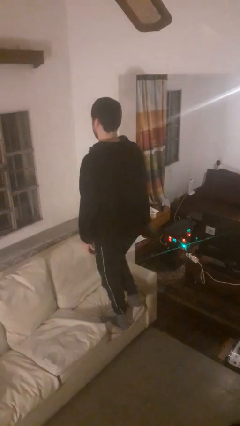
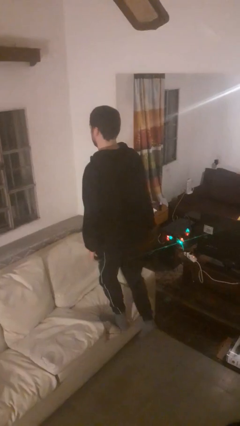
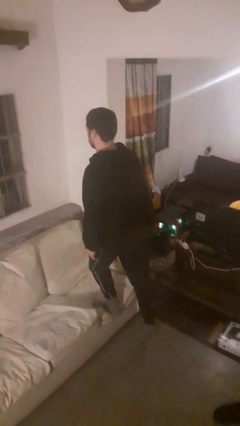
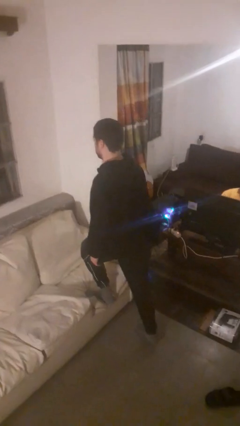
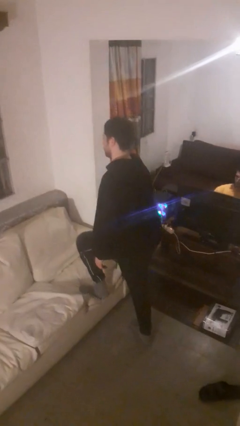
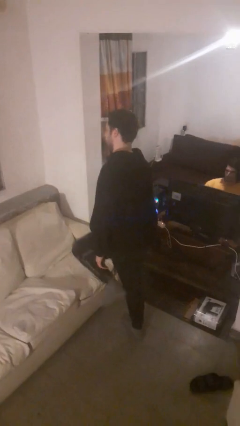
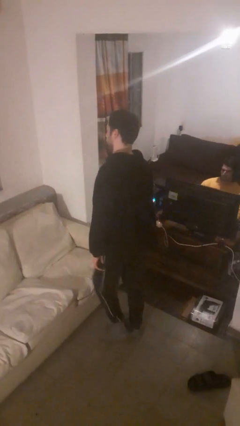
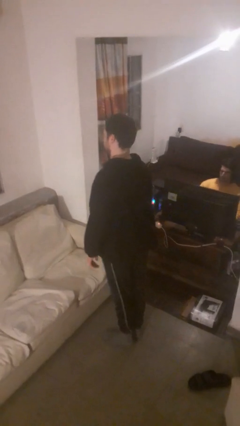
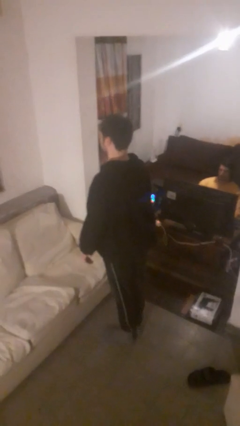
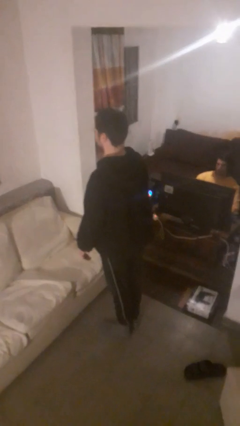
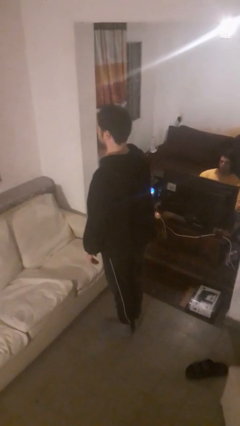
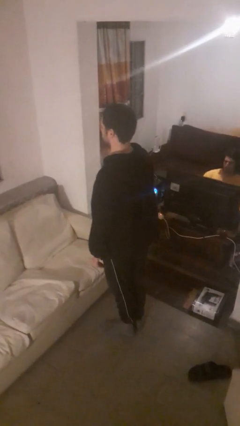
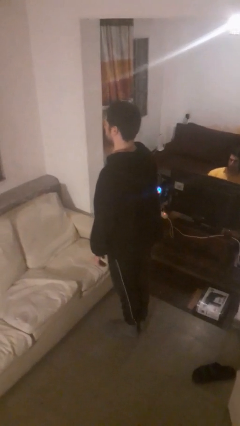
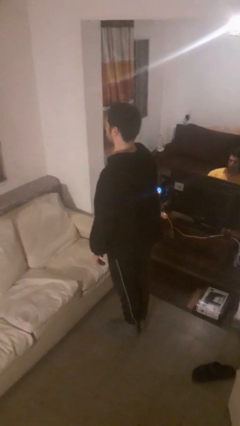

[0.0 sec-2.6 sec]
person climbs off couch

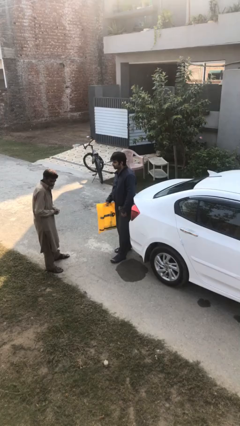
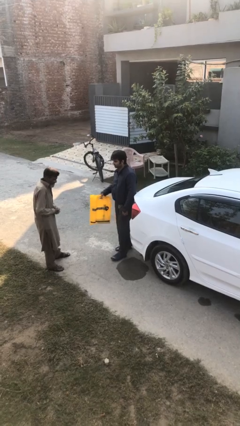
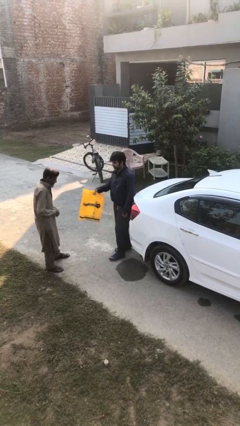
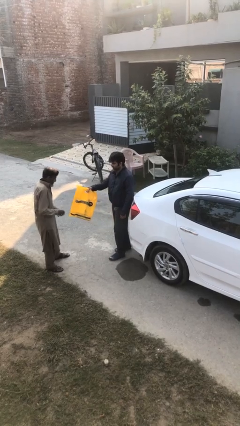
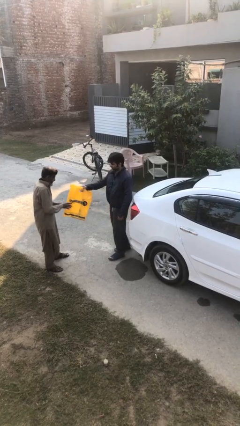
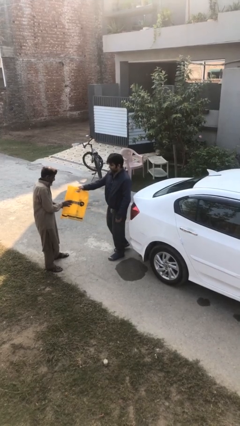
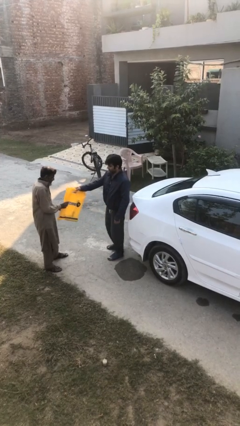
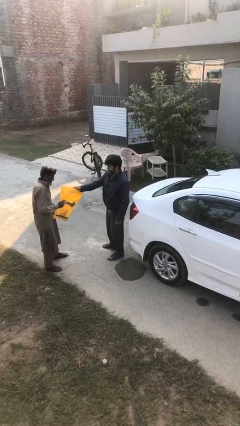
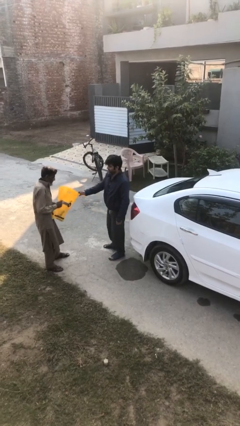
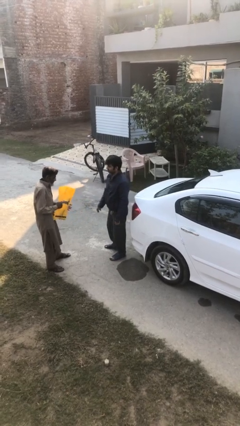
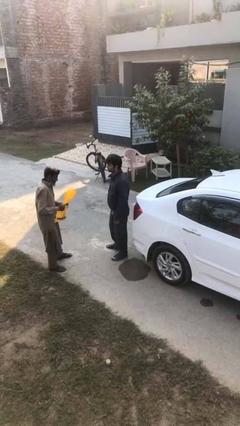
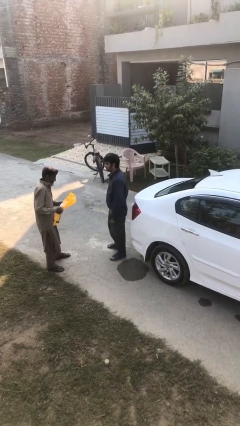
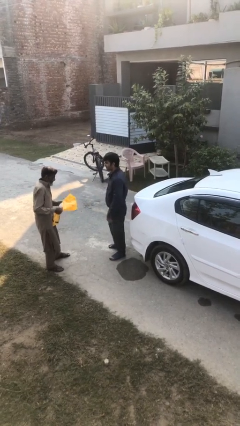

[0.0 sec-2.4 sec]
person transfers object to person

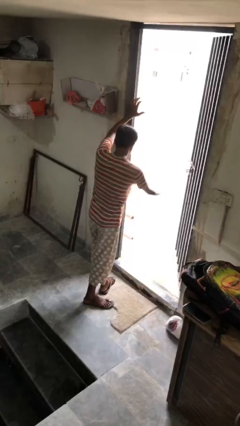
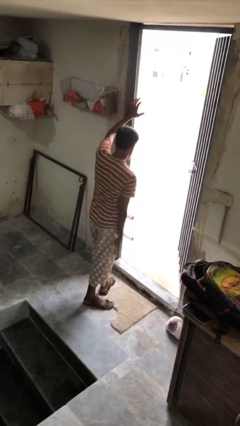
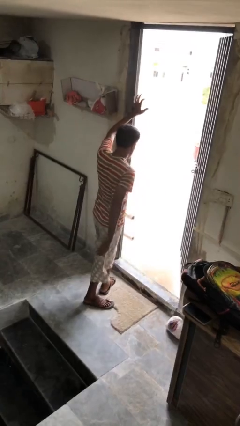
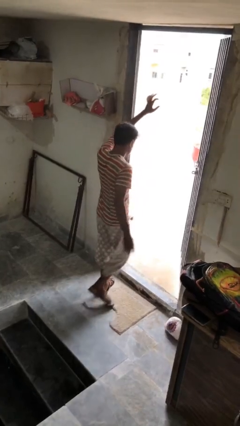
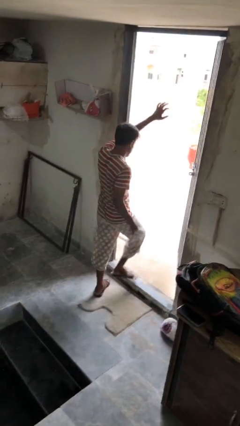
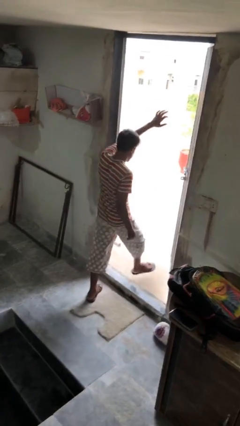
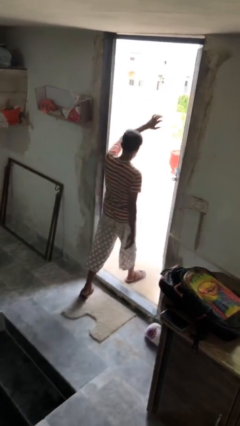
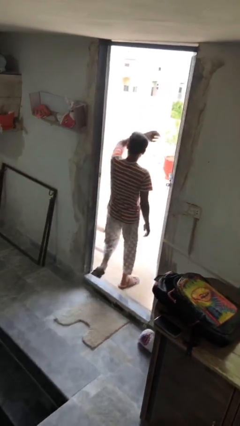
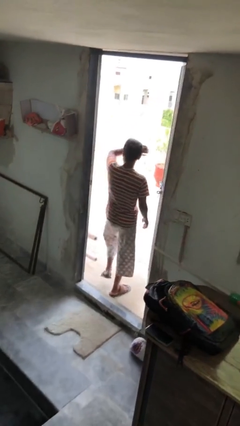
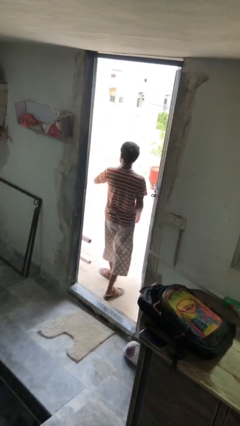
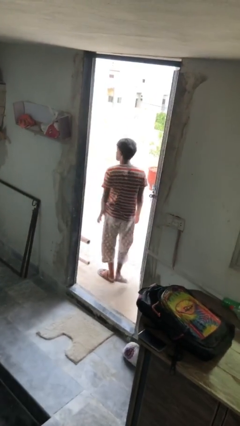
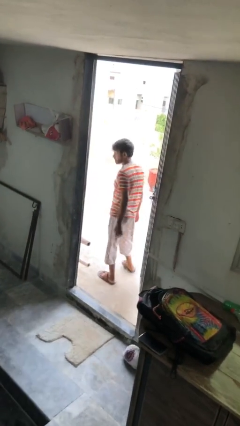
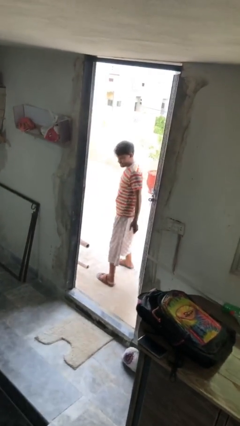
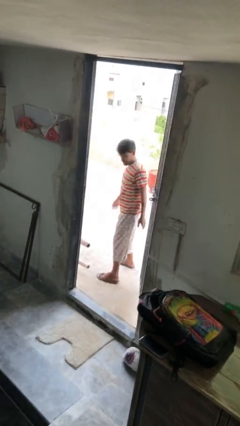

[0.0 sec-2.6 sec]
person exits scene through structure

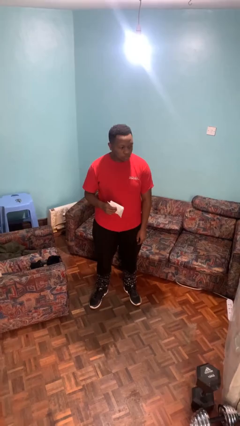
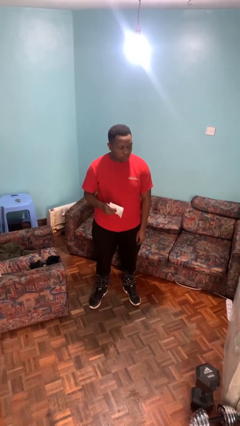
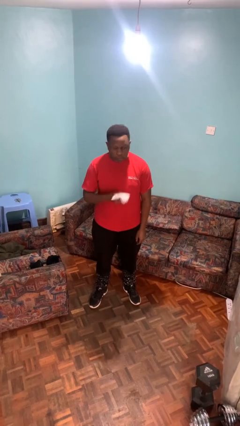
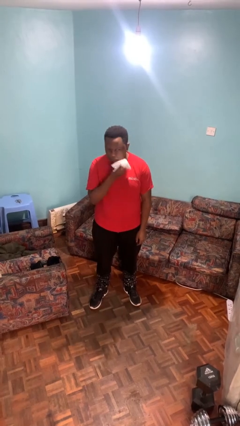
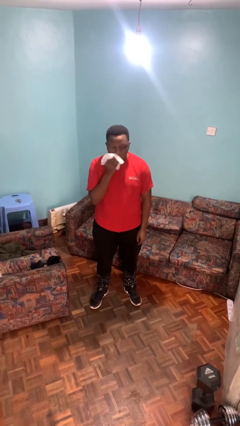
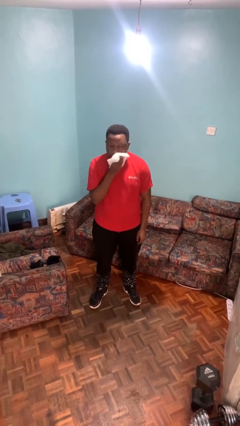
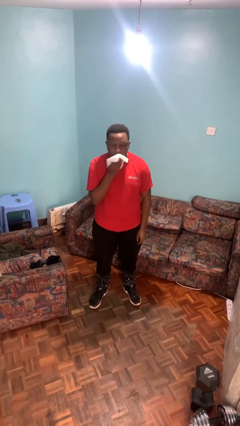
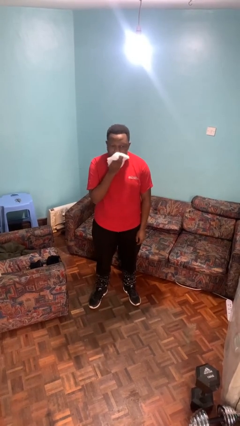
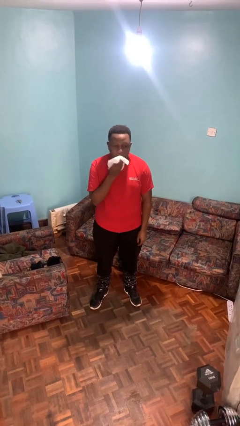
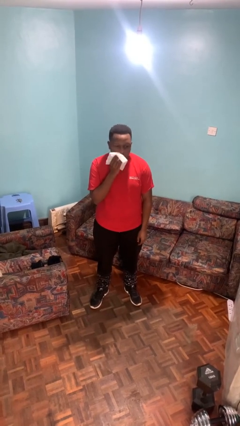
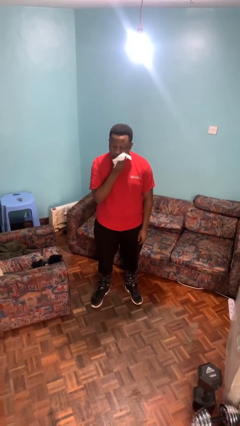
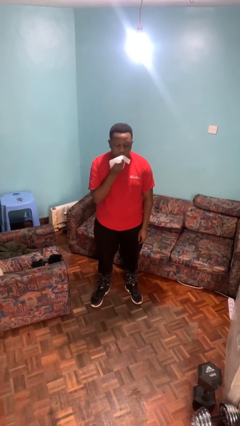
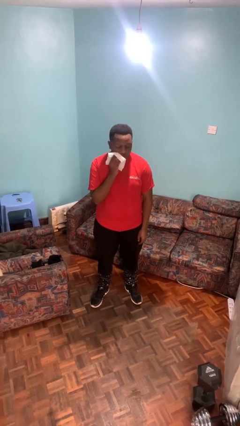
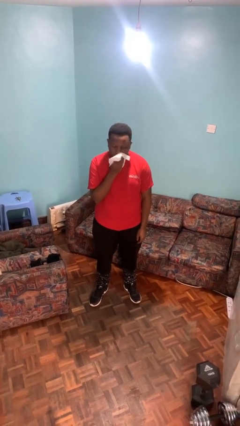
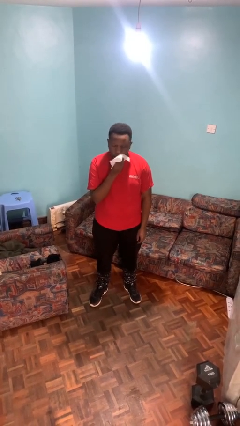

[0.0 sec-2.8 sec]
person wipes mouth with napkin

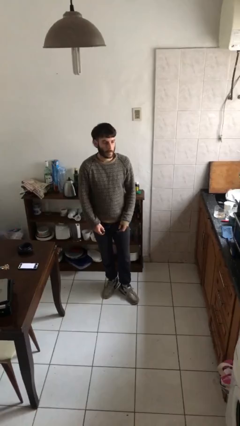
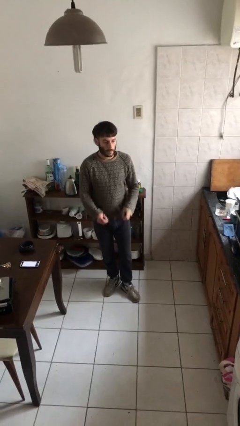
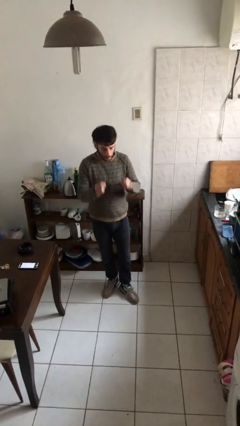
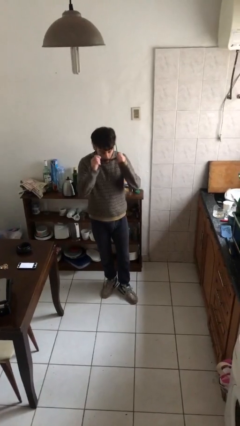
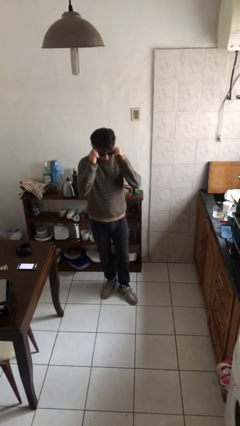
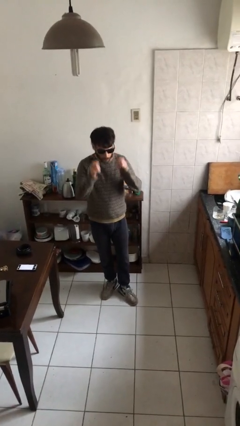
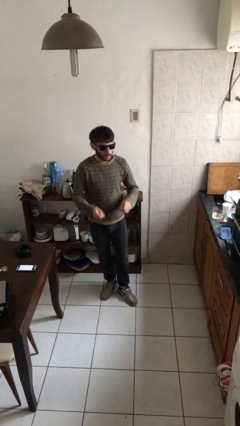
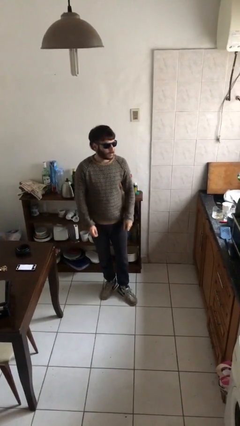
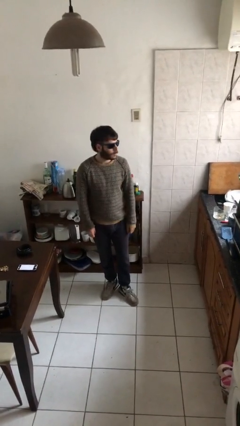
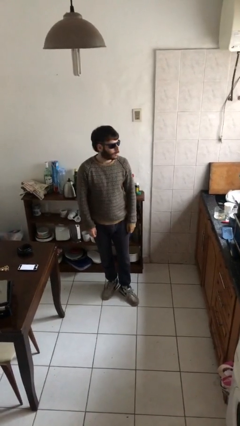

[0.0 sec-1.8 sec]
person puts on sunglasses

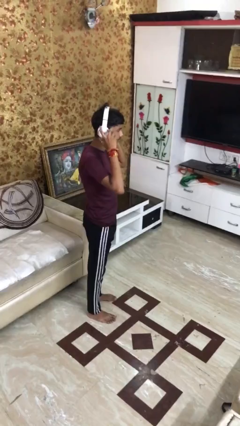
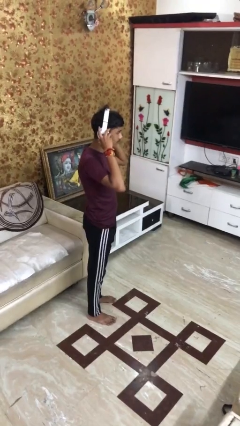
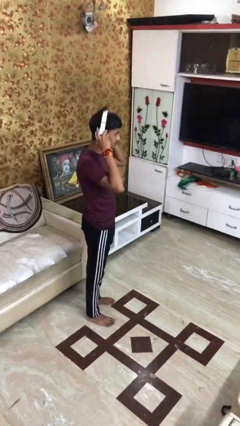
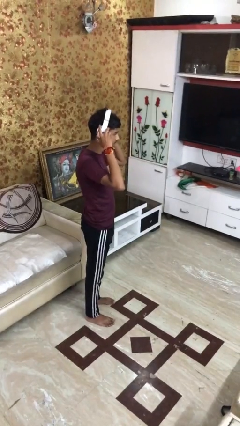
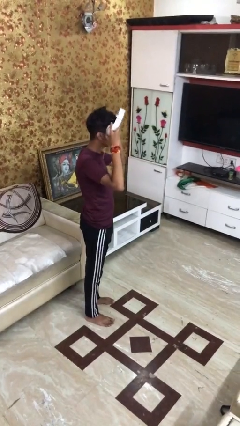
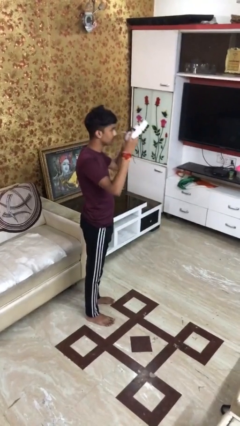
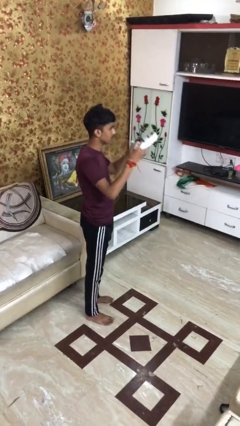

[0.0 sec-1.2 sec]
person takes off headphones

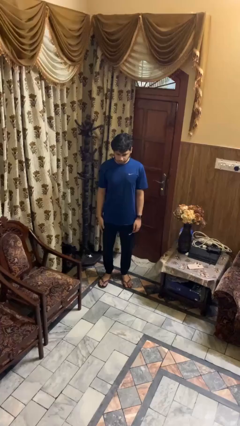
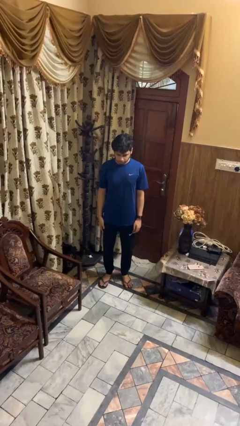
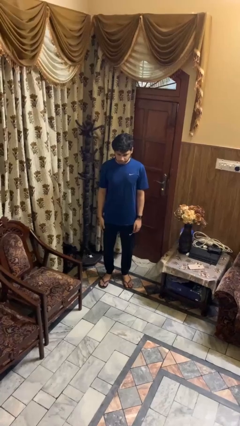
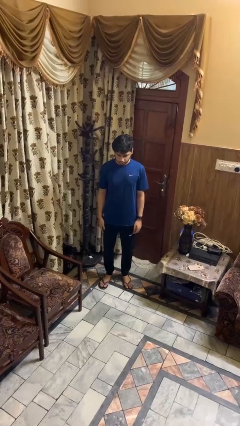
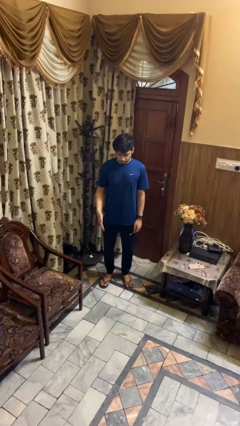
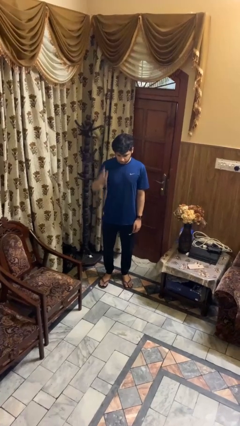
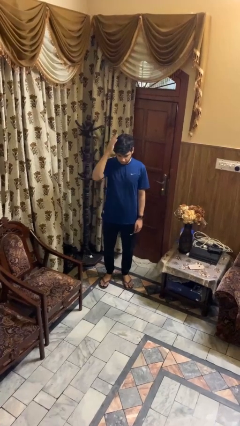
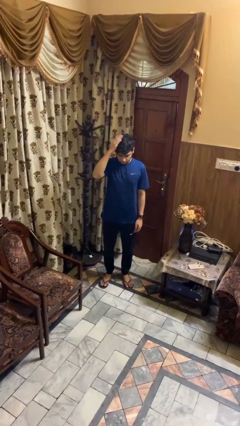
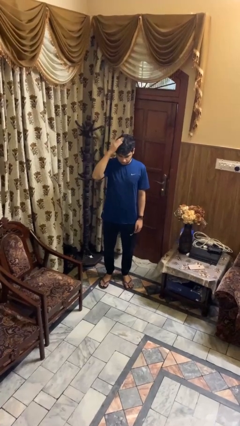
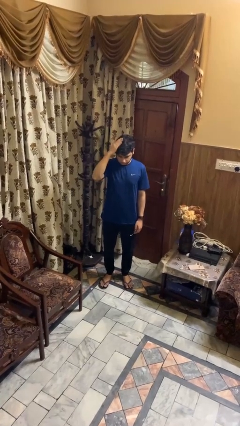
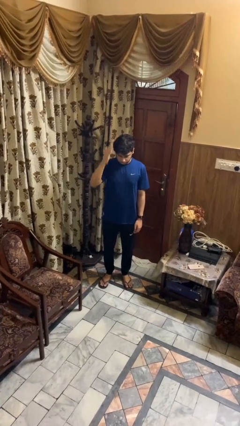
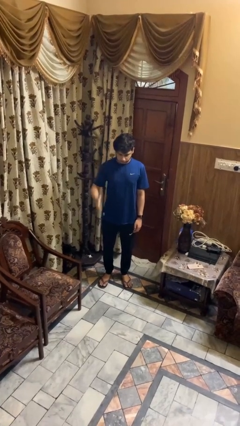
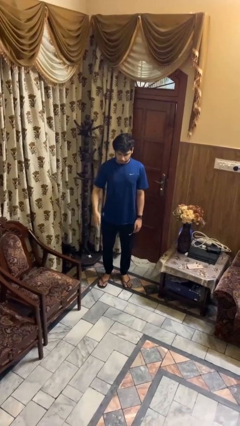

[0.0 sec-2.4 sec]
person pats head

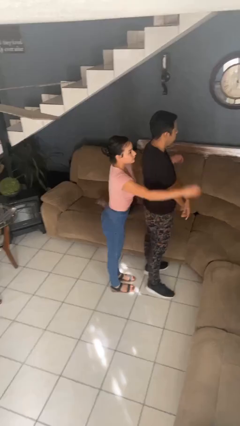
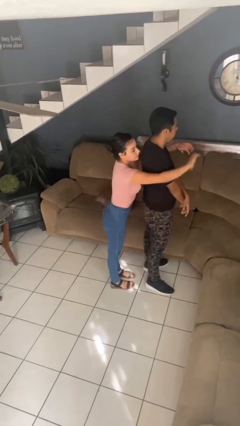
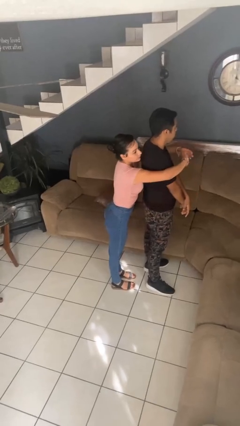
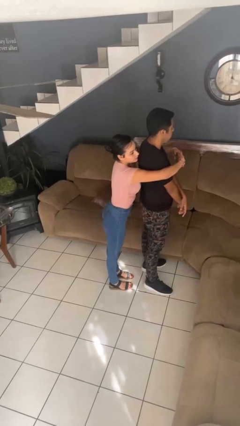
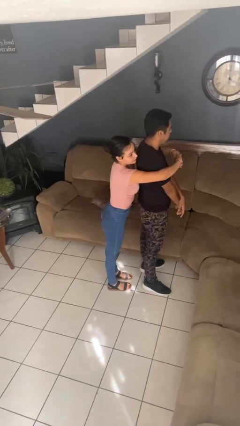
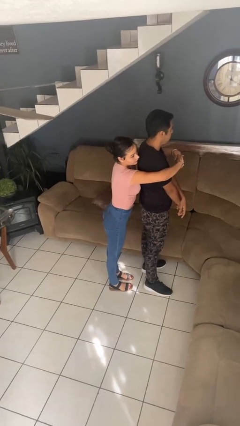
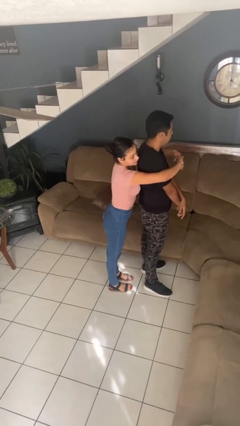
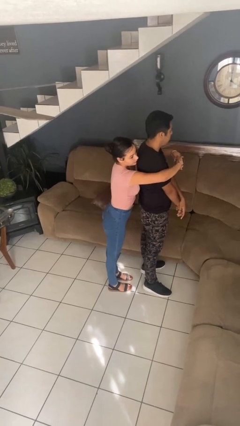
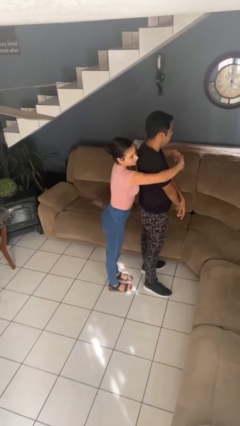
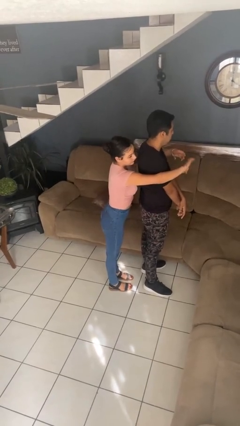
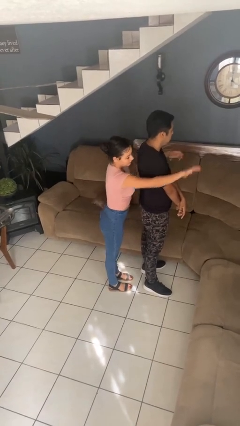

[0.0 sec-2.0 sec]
person hugs person from behind
